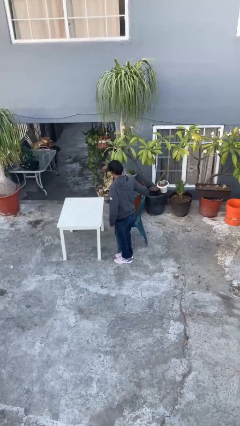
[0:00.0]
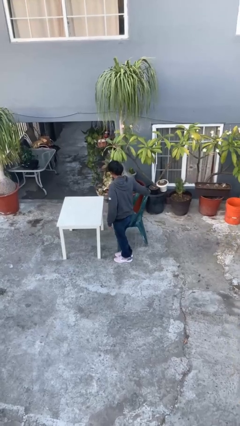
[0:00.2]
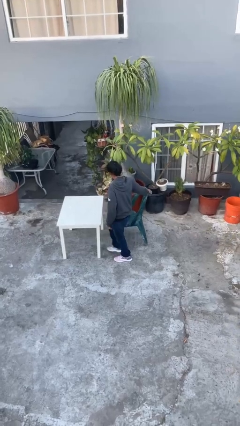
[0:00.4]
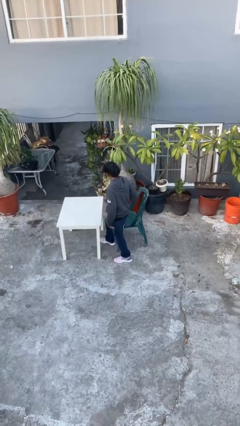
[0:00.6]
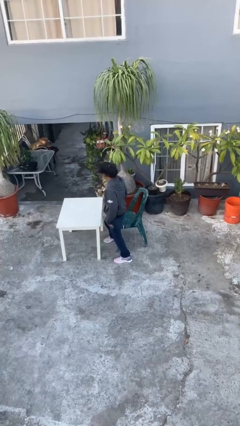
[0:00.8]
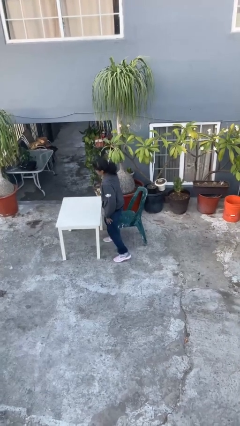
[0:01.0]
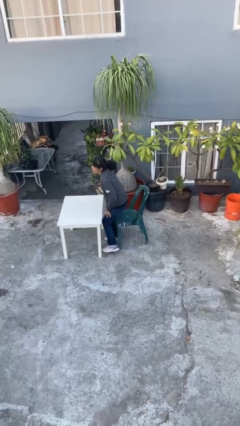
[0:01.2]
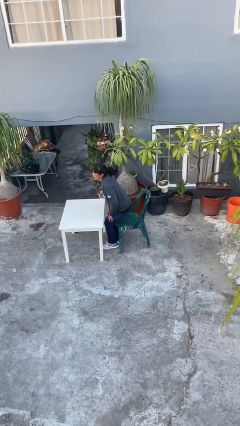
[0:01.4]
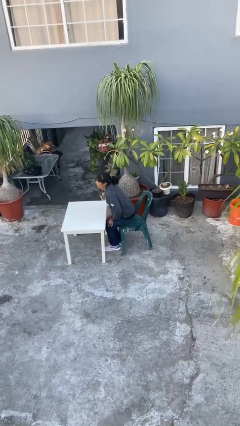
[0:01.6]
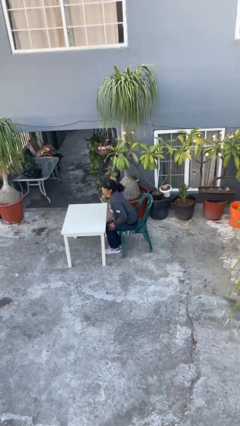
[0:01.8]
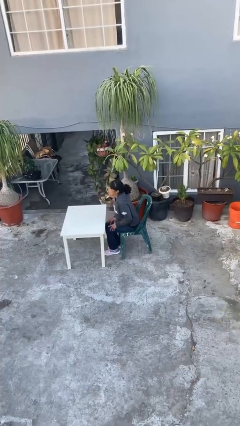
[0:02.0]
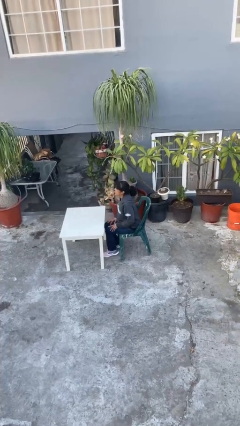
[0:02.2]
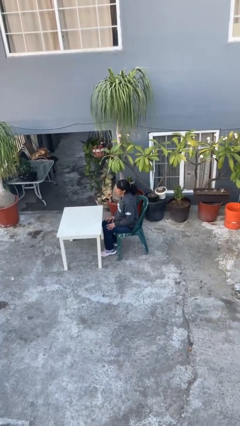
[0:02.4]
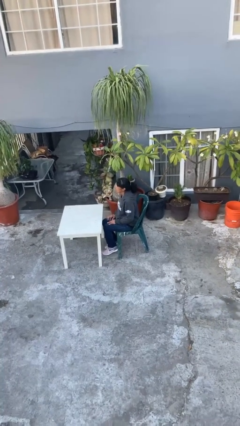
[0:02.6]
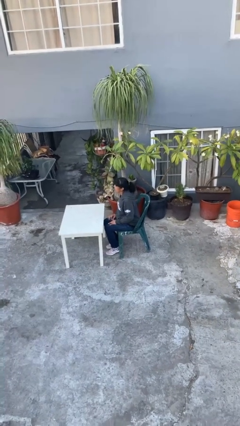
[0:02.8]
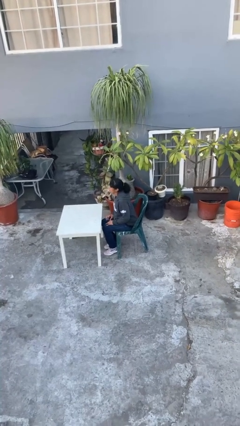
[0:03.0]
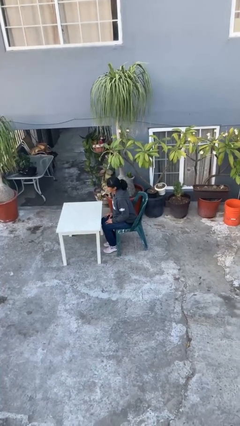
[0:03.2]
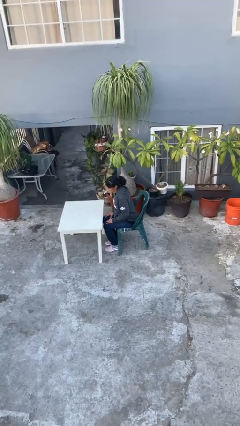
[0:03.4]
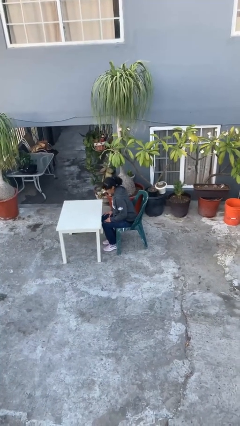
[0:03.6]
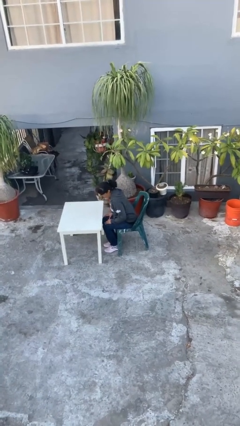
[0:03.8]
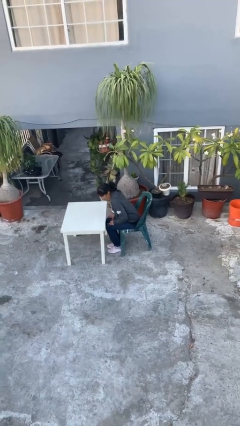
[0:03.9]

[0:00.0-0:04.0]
person sits down

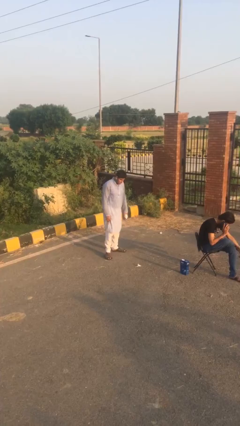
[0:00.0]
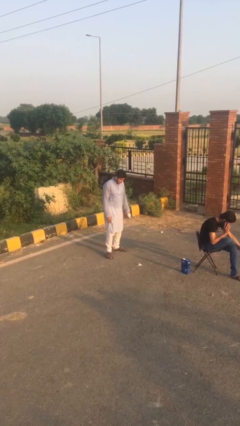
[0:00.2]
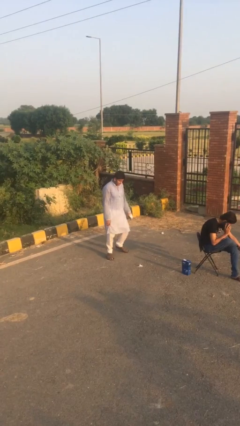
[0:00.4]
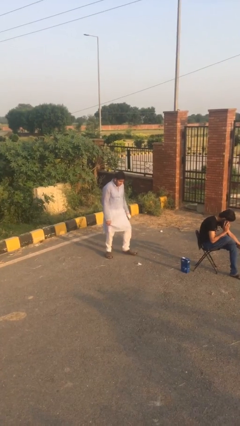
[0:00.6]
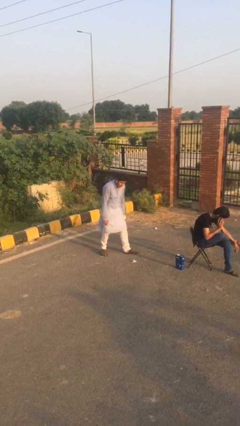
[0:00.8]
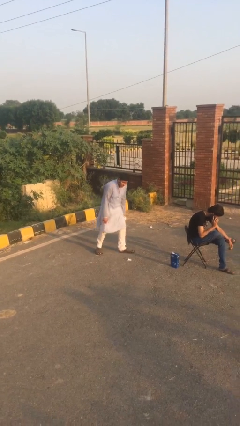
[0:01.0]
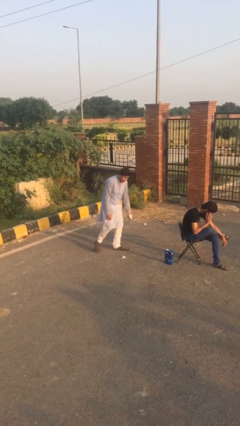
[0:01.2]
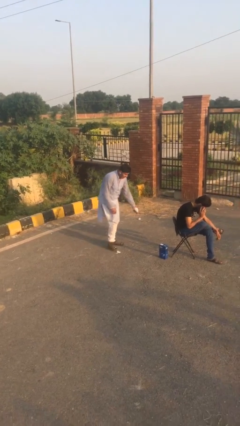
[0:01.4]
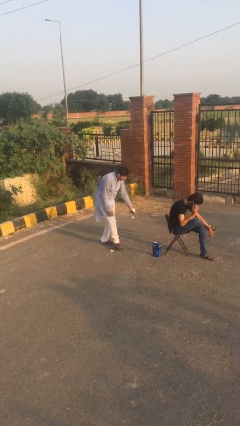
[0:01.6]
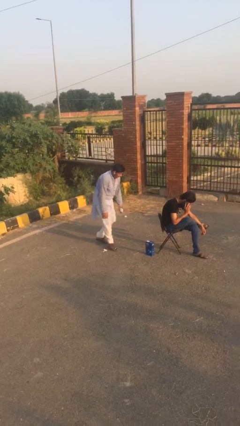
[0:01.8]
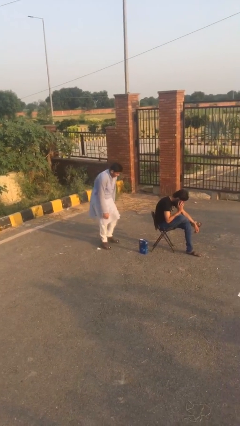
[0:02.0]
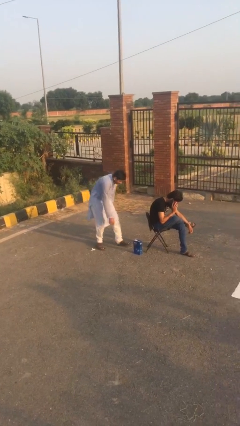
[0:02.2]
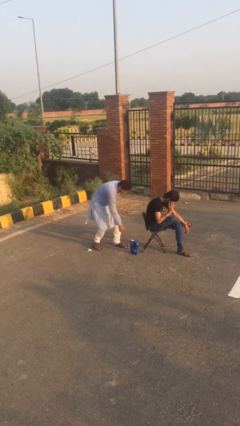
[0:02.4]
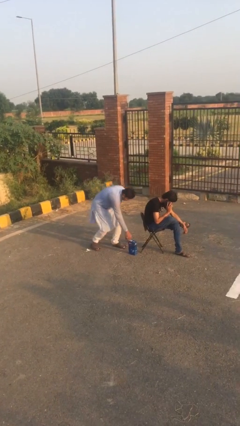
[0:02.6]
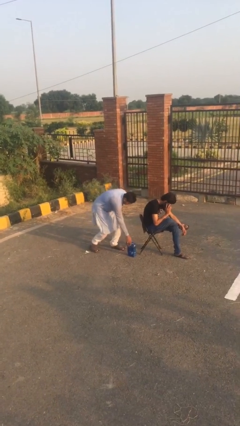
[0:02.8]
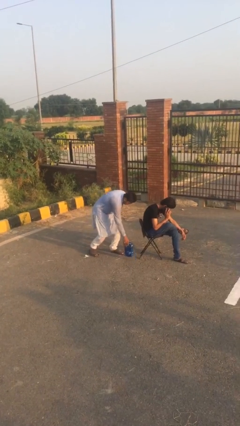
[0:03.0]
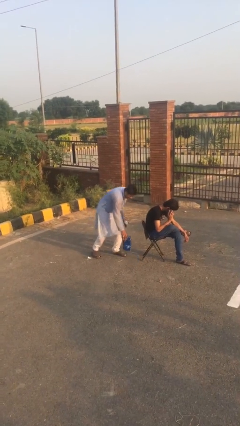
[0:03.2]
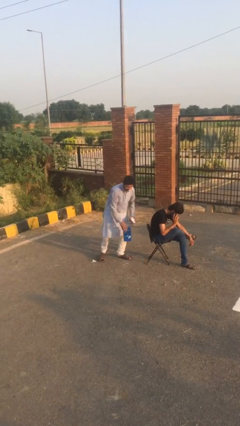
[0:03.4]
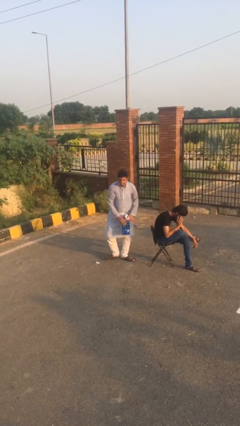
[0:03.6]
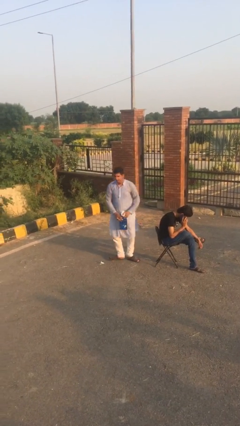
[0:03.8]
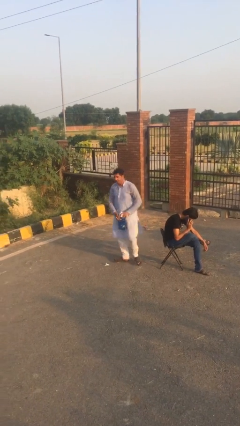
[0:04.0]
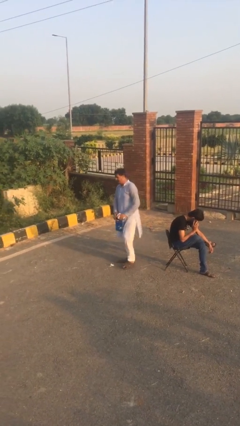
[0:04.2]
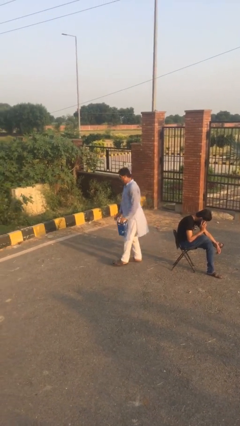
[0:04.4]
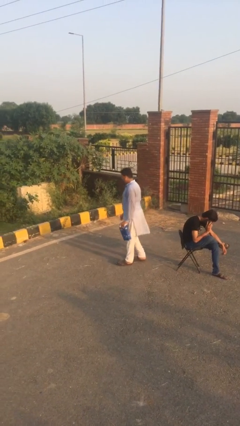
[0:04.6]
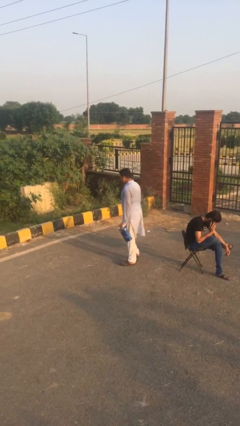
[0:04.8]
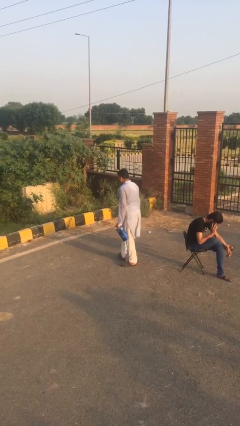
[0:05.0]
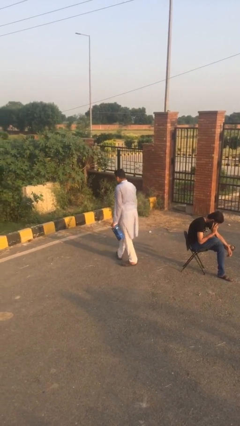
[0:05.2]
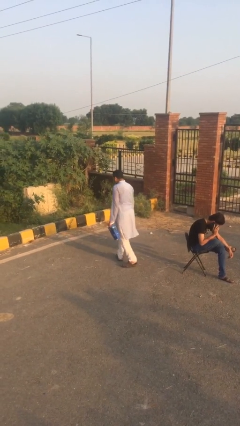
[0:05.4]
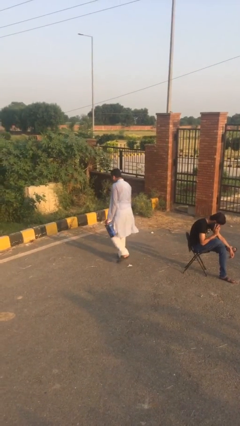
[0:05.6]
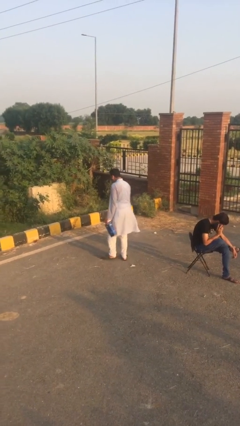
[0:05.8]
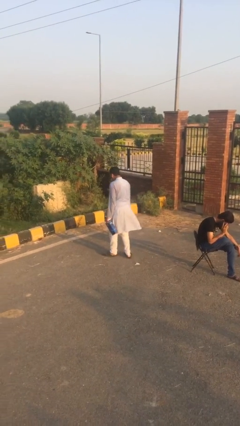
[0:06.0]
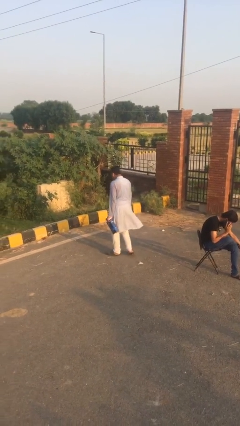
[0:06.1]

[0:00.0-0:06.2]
person steals object from person

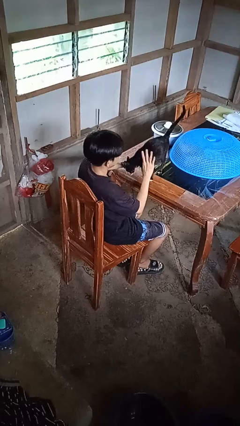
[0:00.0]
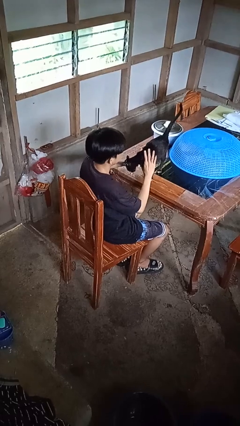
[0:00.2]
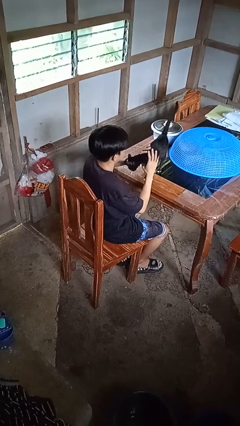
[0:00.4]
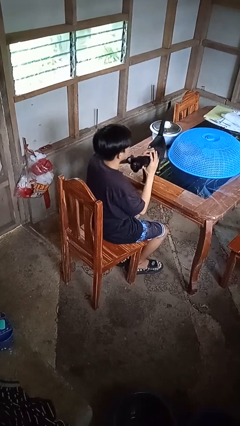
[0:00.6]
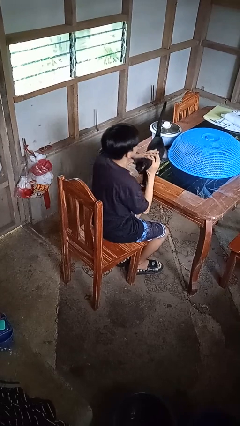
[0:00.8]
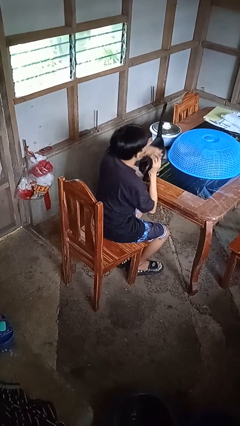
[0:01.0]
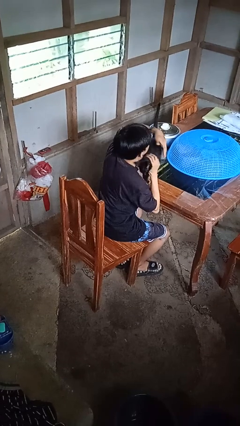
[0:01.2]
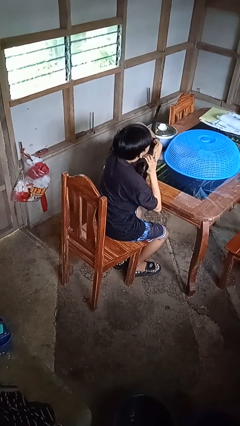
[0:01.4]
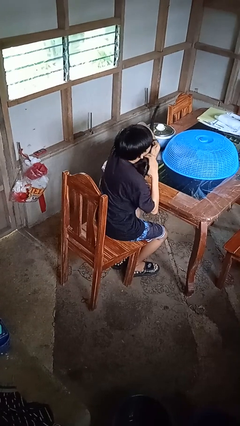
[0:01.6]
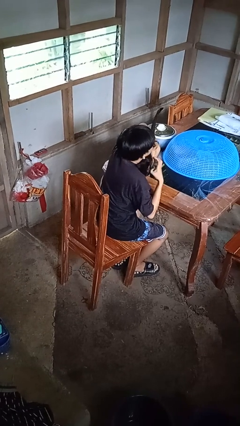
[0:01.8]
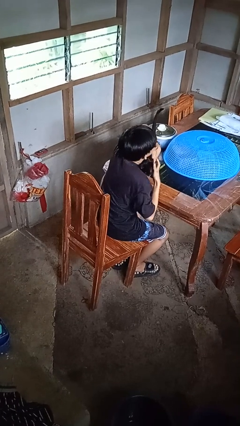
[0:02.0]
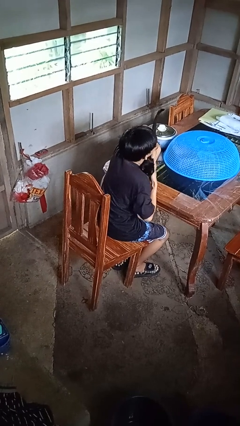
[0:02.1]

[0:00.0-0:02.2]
person hugs cat

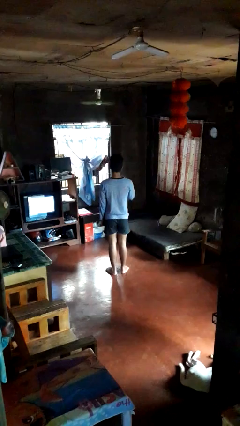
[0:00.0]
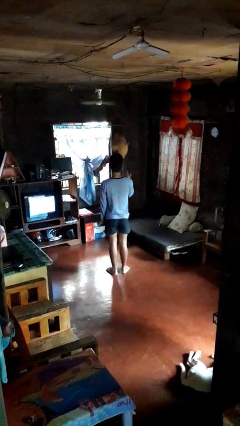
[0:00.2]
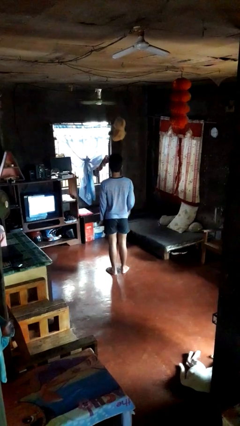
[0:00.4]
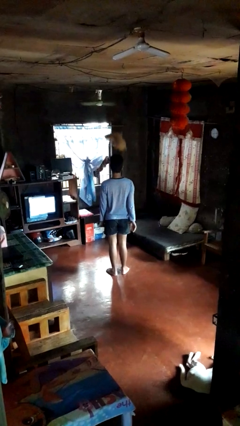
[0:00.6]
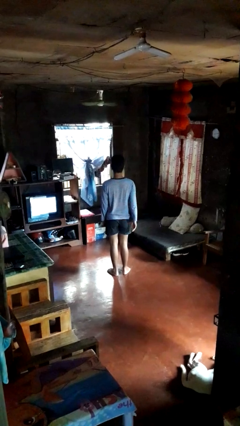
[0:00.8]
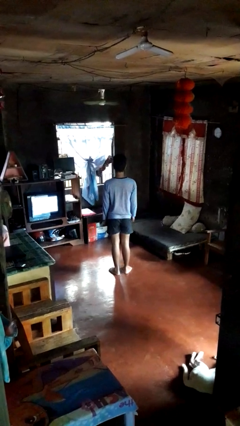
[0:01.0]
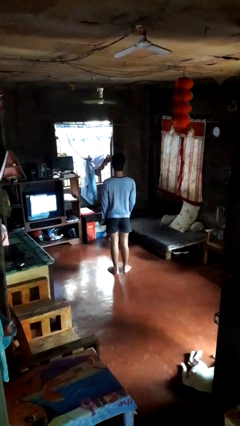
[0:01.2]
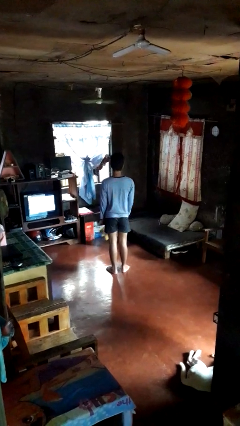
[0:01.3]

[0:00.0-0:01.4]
person throws object into air

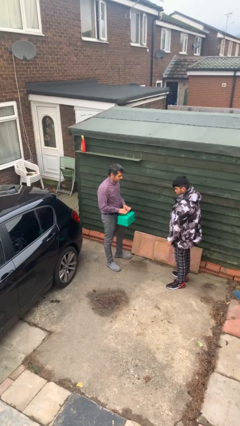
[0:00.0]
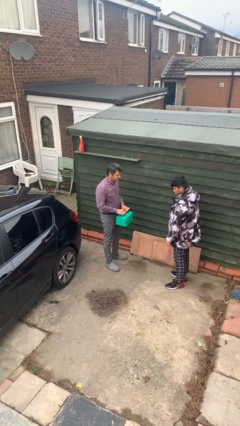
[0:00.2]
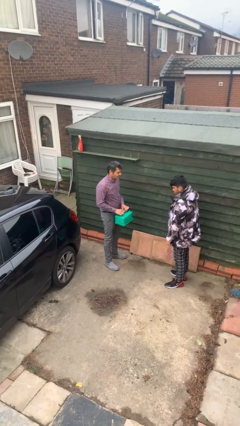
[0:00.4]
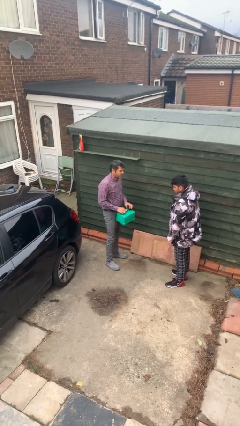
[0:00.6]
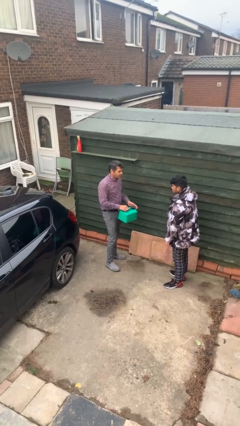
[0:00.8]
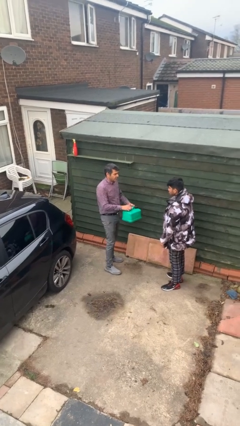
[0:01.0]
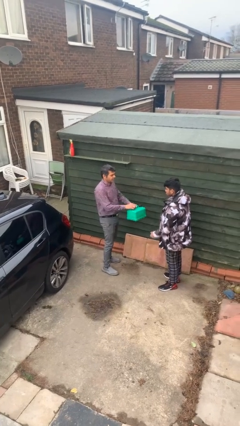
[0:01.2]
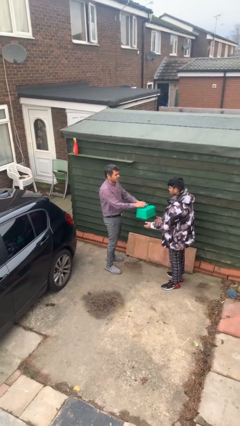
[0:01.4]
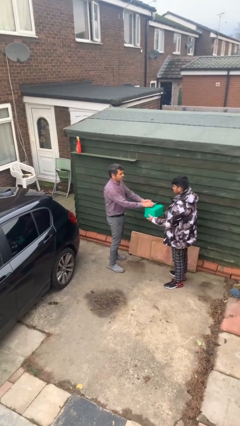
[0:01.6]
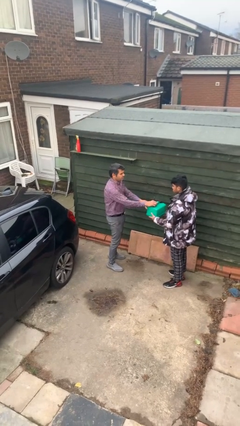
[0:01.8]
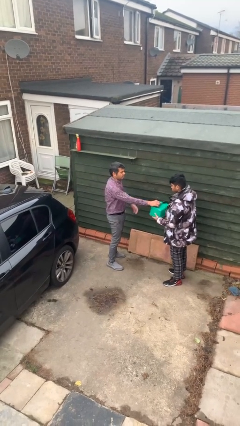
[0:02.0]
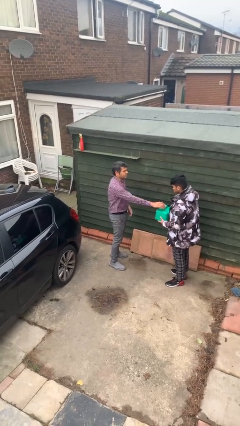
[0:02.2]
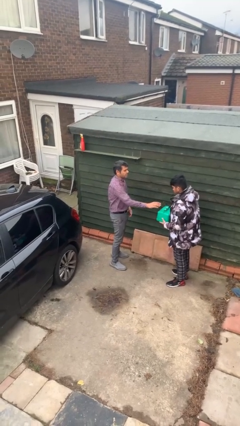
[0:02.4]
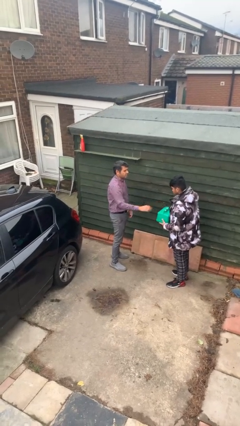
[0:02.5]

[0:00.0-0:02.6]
person transfers object to person

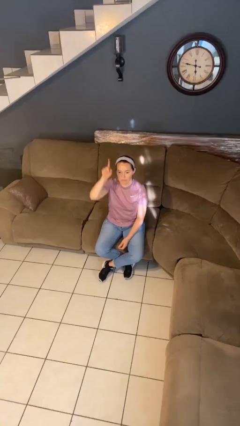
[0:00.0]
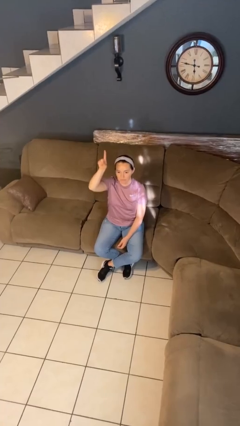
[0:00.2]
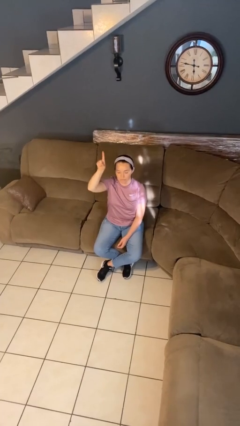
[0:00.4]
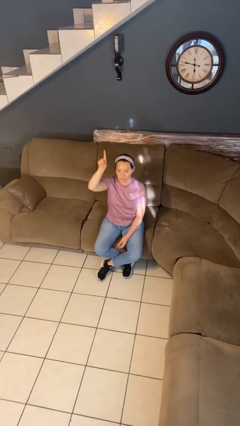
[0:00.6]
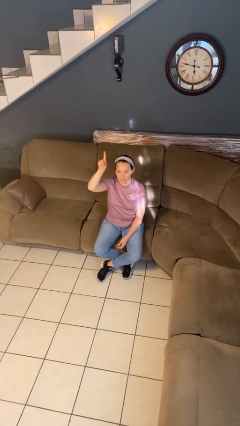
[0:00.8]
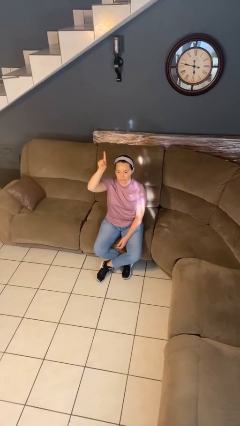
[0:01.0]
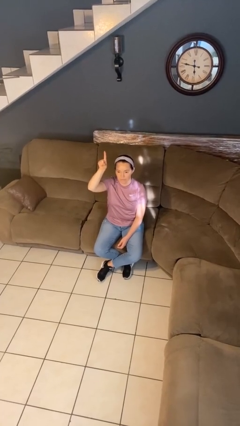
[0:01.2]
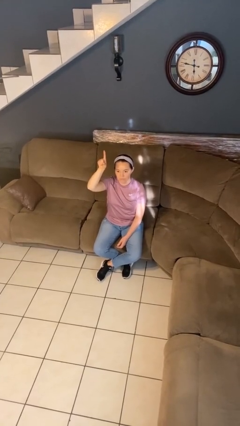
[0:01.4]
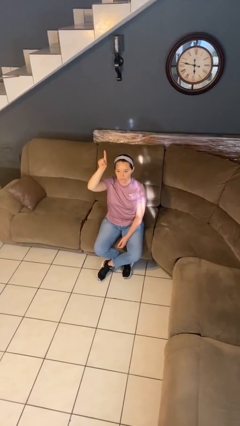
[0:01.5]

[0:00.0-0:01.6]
person gestures number one
